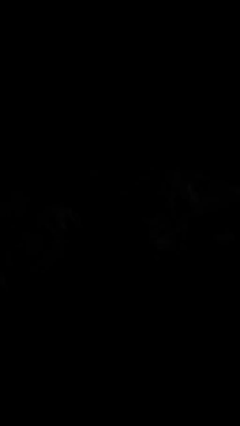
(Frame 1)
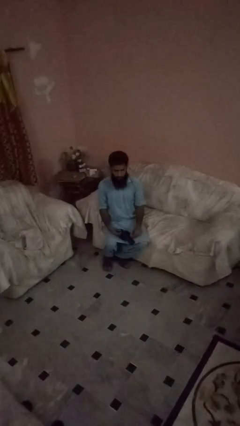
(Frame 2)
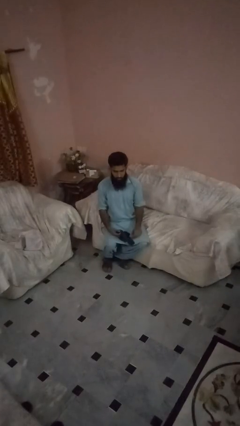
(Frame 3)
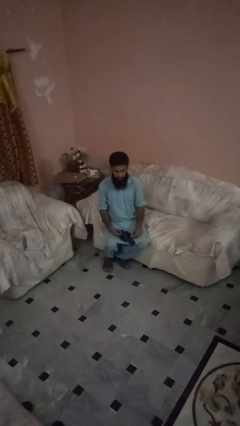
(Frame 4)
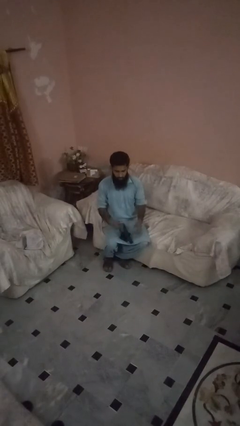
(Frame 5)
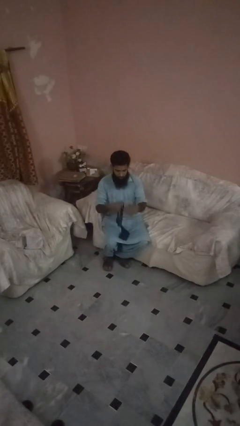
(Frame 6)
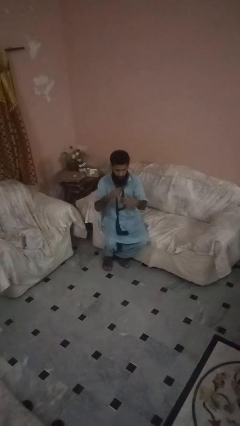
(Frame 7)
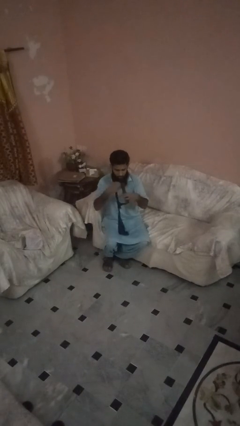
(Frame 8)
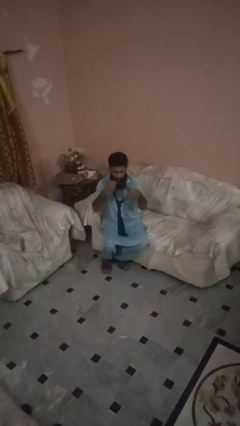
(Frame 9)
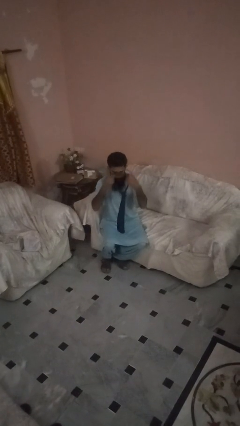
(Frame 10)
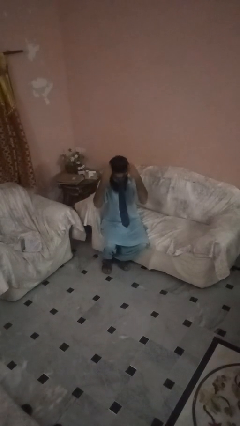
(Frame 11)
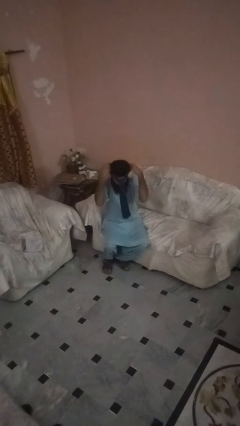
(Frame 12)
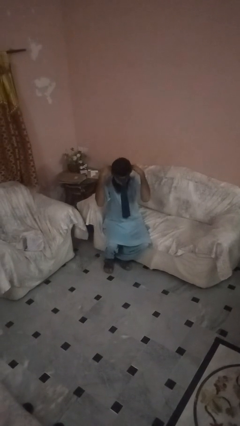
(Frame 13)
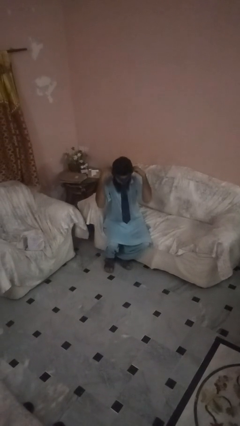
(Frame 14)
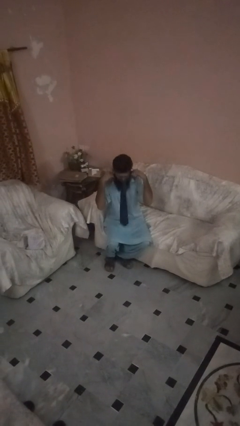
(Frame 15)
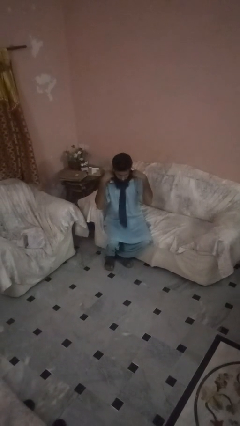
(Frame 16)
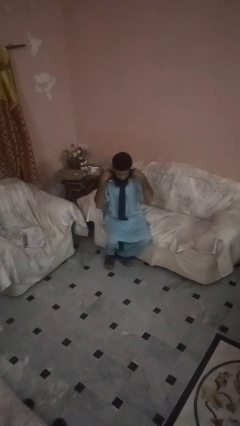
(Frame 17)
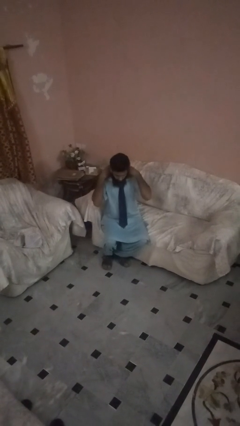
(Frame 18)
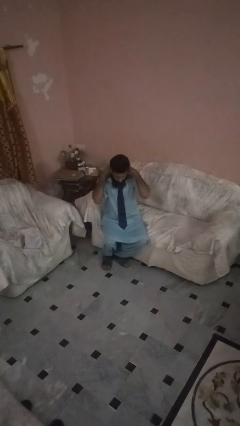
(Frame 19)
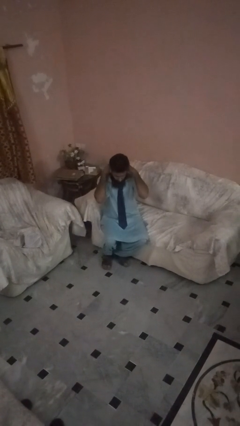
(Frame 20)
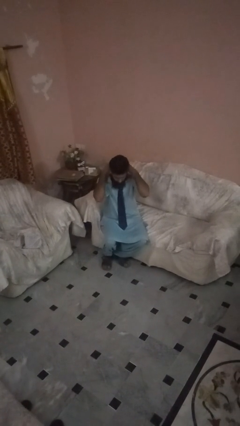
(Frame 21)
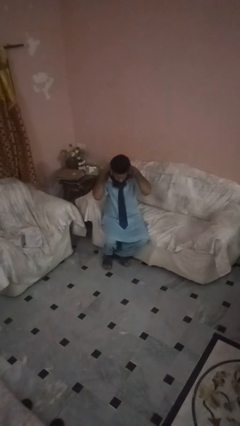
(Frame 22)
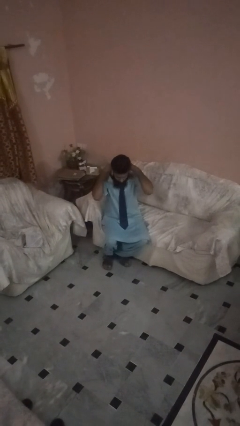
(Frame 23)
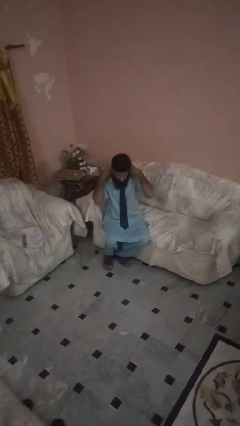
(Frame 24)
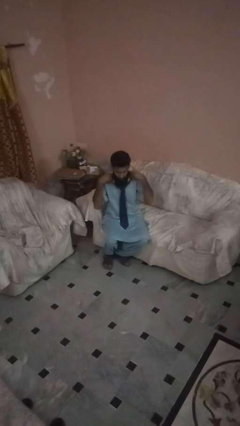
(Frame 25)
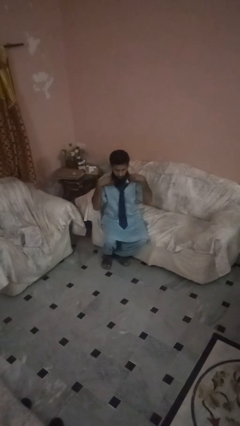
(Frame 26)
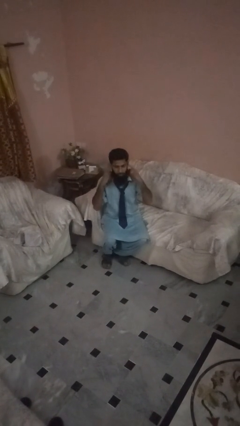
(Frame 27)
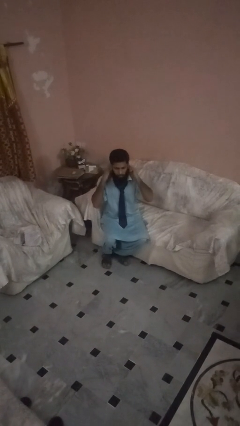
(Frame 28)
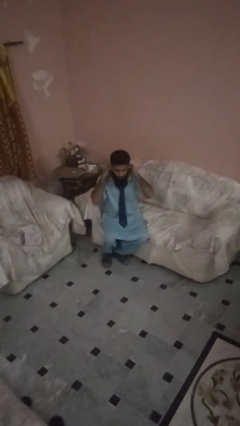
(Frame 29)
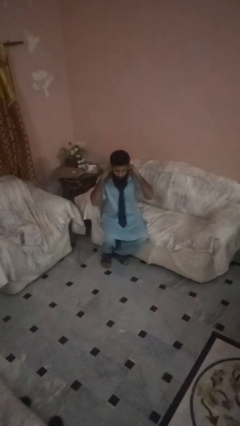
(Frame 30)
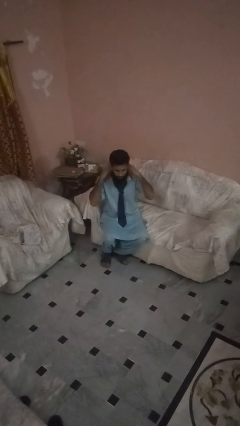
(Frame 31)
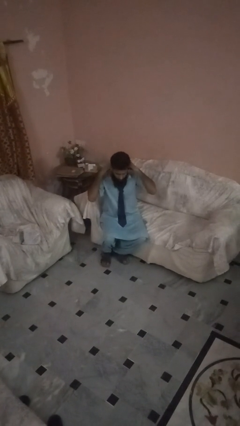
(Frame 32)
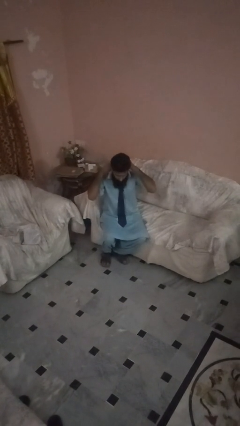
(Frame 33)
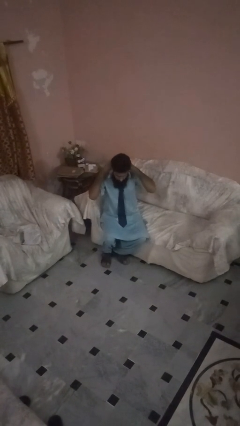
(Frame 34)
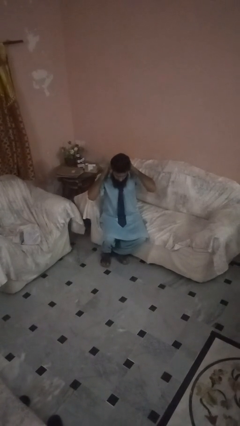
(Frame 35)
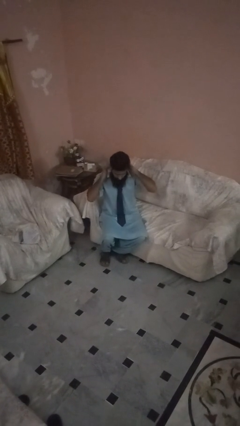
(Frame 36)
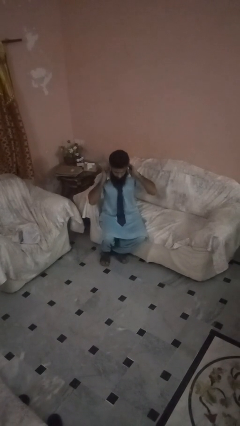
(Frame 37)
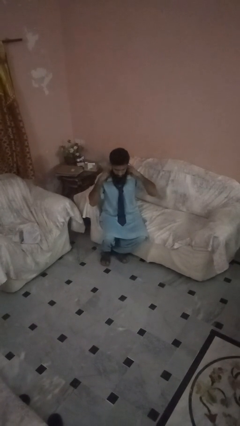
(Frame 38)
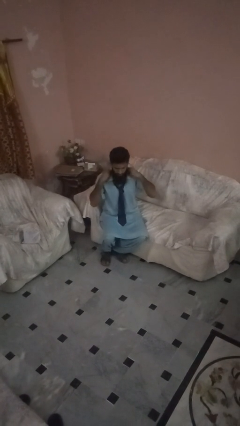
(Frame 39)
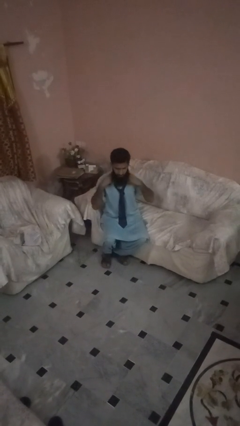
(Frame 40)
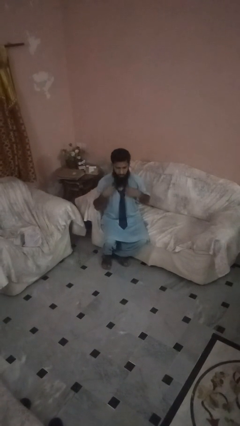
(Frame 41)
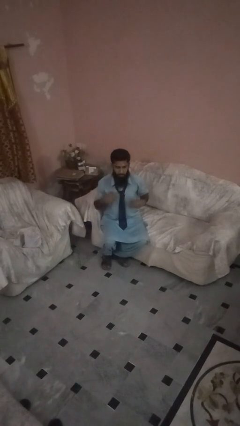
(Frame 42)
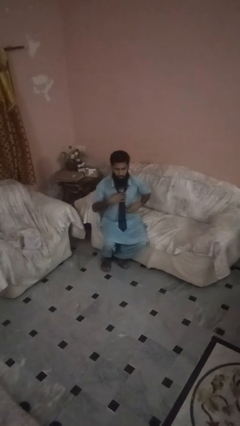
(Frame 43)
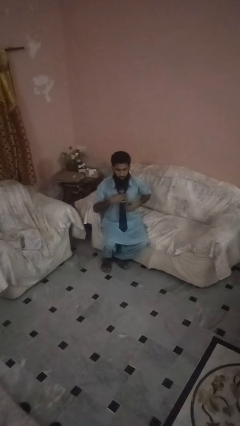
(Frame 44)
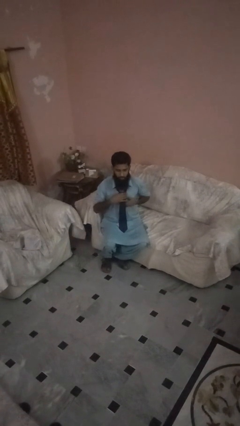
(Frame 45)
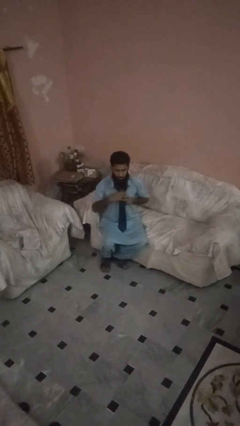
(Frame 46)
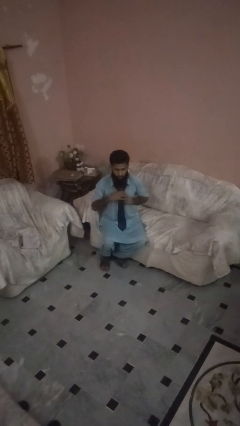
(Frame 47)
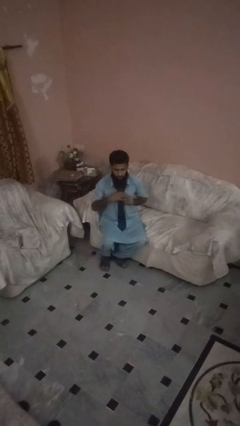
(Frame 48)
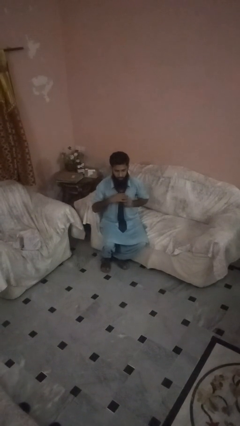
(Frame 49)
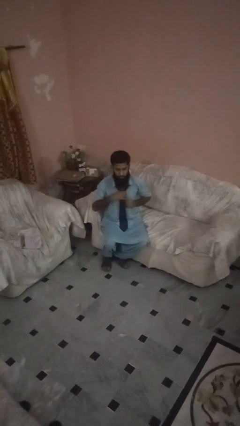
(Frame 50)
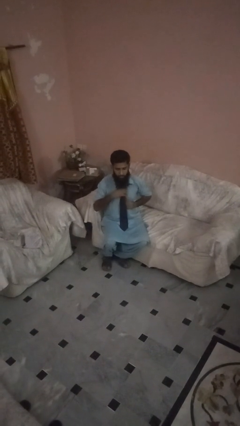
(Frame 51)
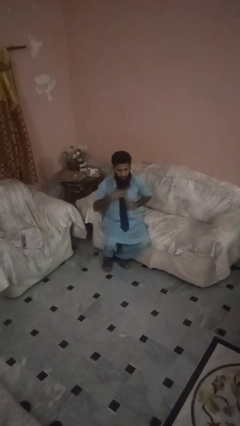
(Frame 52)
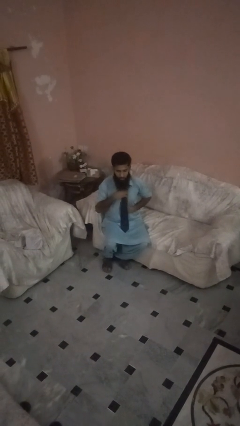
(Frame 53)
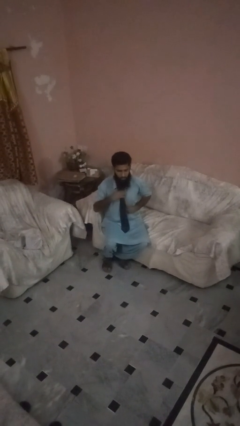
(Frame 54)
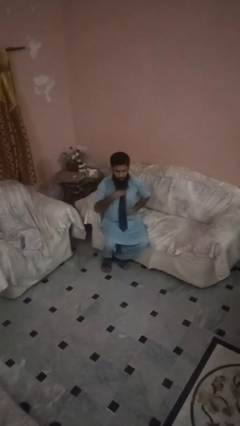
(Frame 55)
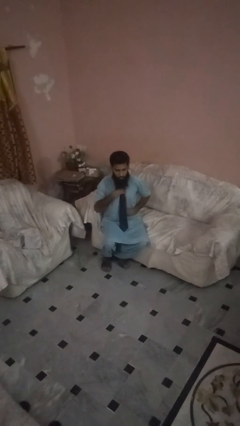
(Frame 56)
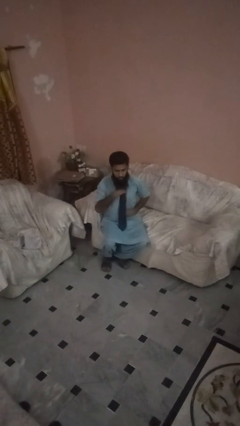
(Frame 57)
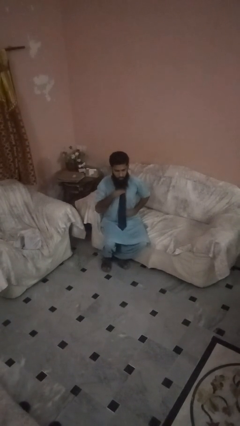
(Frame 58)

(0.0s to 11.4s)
person puts on necktie

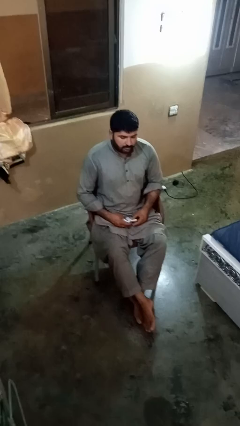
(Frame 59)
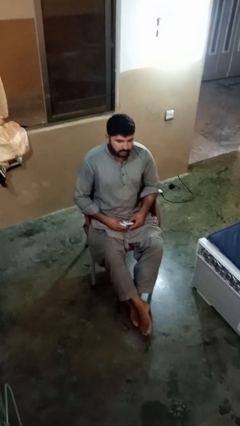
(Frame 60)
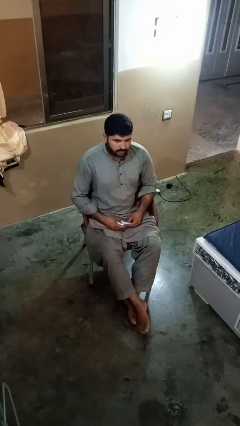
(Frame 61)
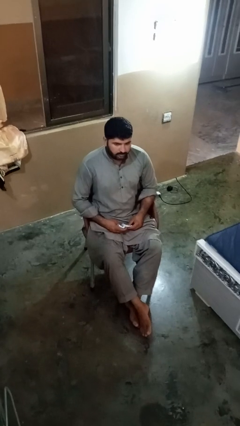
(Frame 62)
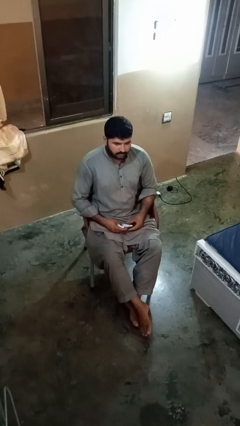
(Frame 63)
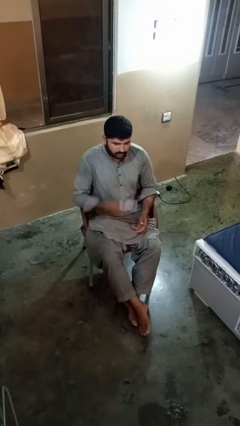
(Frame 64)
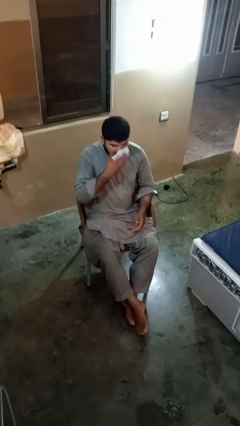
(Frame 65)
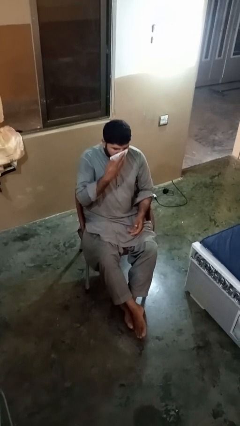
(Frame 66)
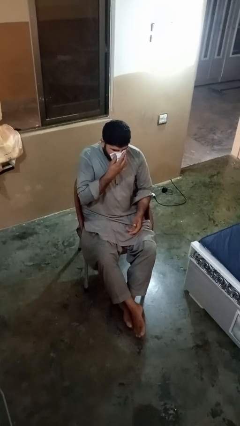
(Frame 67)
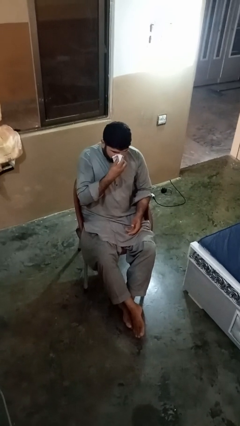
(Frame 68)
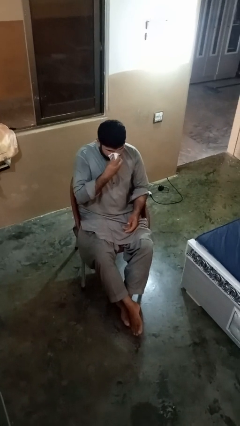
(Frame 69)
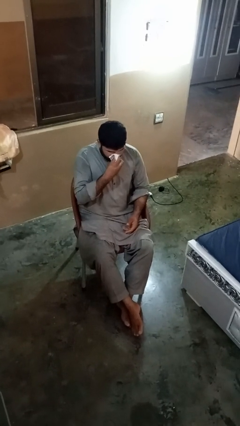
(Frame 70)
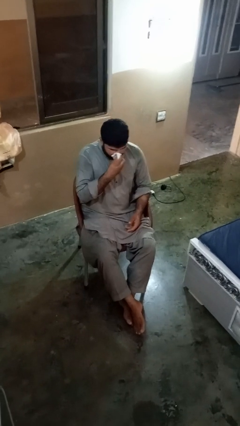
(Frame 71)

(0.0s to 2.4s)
person blows nose

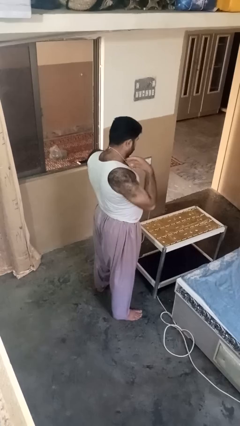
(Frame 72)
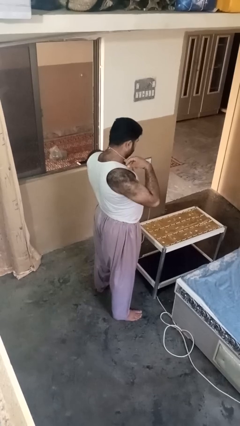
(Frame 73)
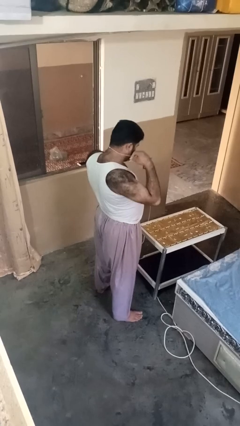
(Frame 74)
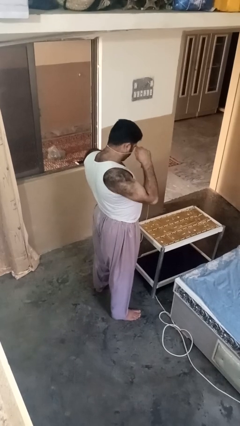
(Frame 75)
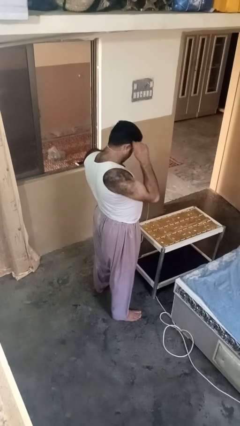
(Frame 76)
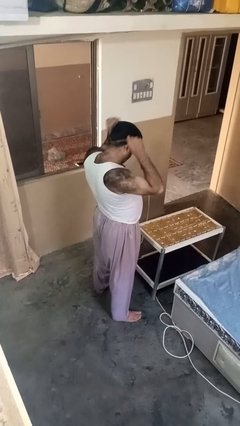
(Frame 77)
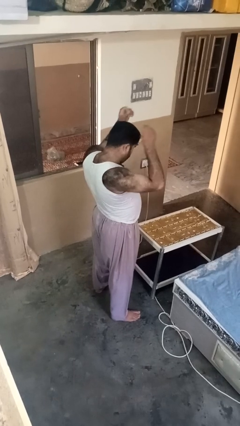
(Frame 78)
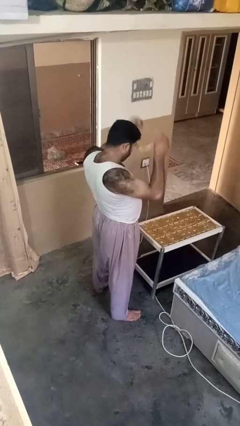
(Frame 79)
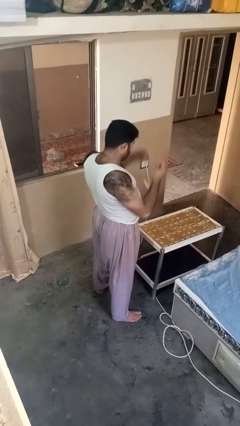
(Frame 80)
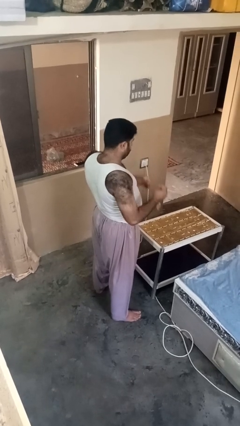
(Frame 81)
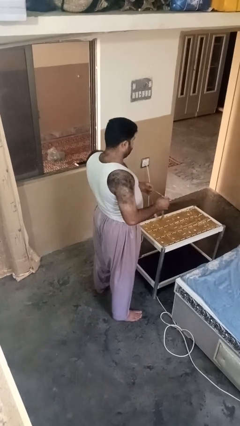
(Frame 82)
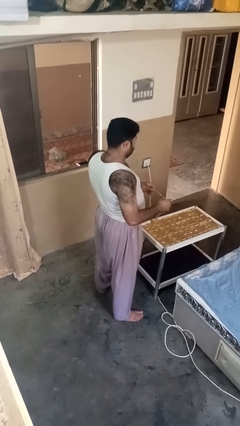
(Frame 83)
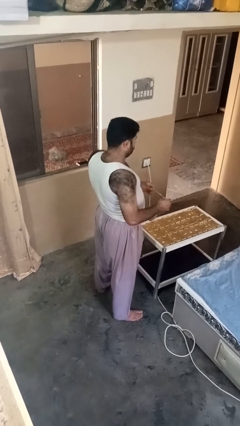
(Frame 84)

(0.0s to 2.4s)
person takes off necklace

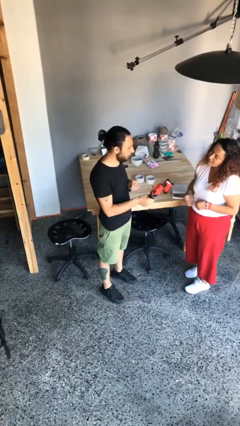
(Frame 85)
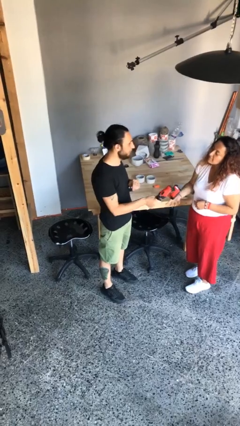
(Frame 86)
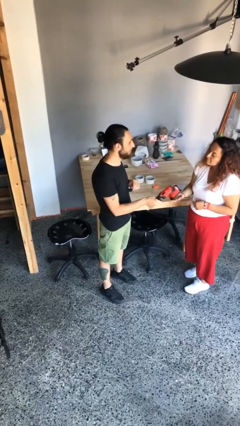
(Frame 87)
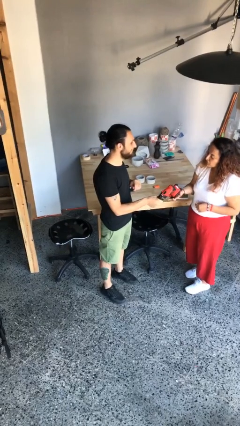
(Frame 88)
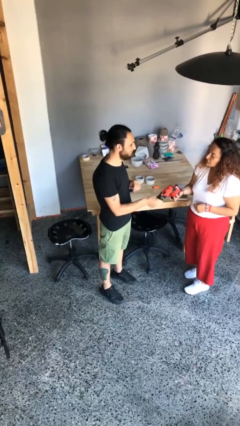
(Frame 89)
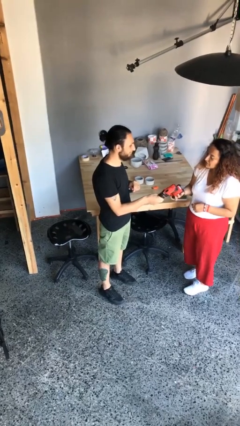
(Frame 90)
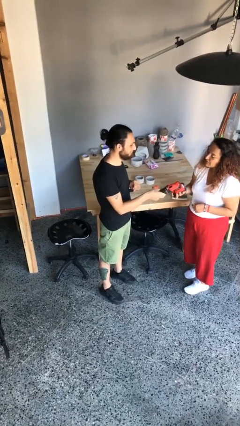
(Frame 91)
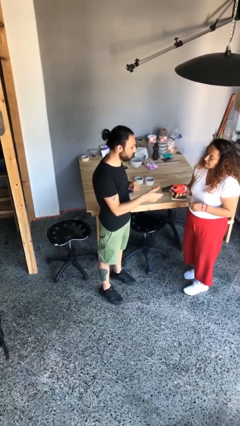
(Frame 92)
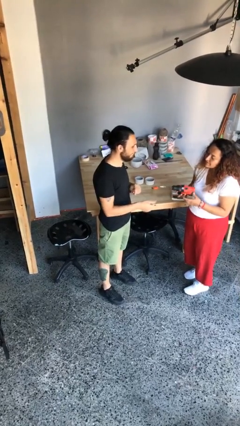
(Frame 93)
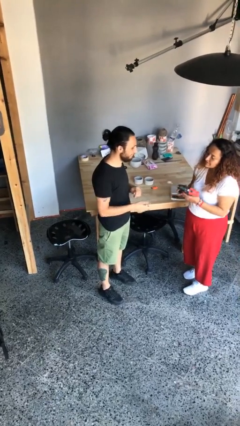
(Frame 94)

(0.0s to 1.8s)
person transfers object to person
